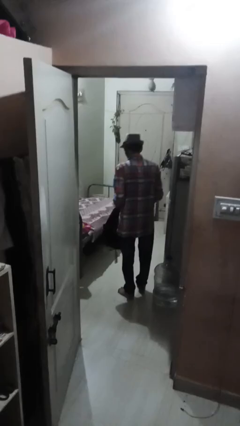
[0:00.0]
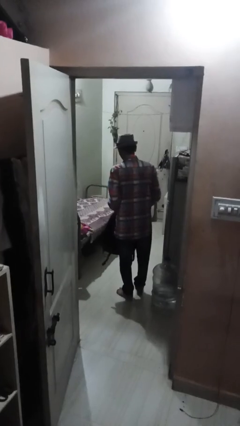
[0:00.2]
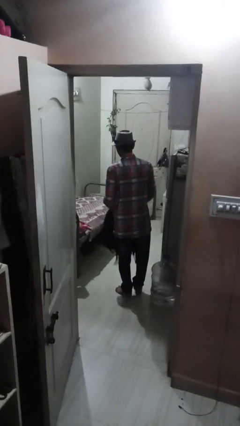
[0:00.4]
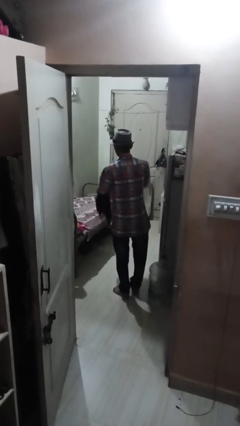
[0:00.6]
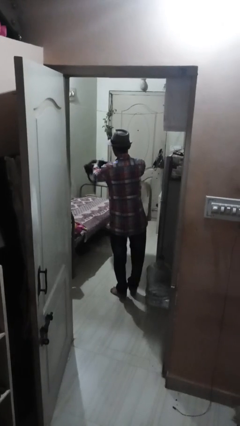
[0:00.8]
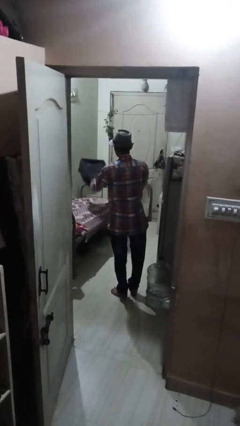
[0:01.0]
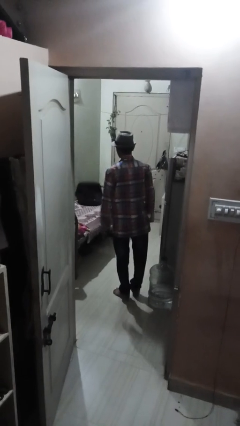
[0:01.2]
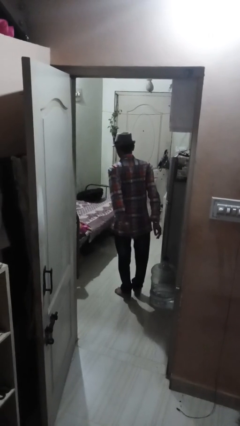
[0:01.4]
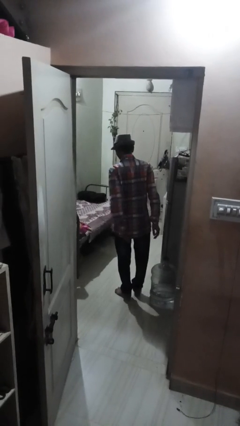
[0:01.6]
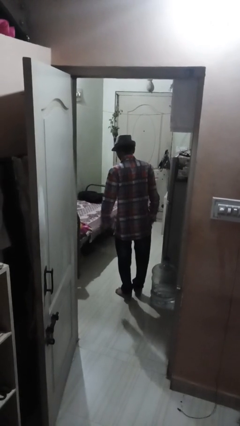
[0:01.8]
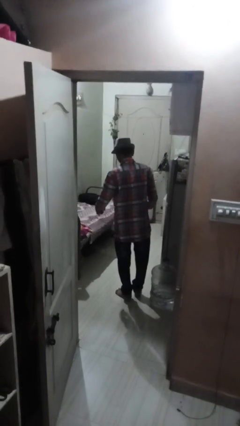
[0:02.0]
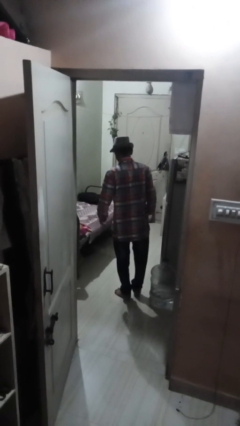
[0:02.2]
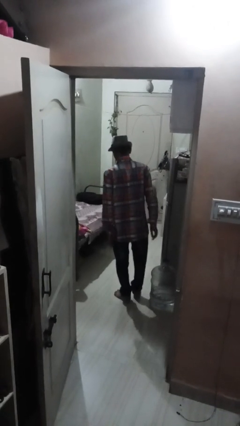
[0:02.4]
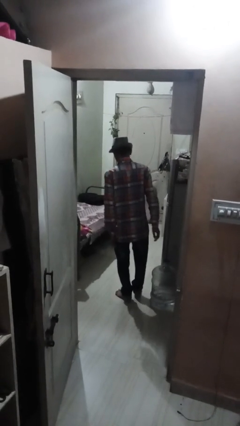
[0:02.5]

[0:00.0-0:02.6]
person throws object on bed

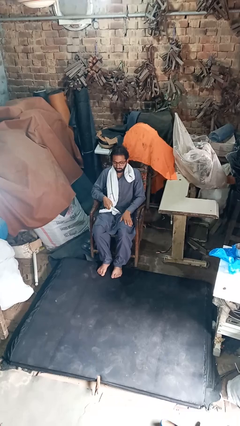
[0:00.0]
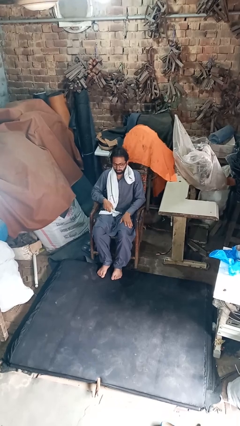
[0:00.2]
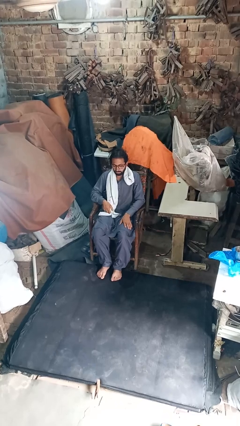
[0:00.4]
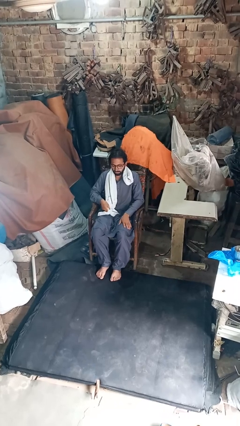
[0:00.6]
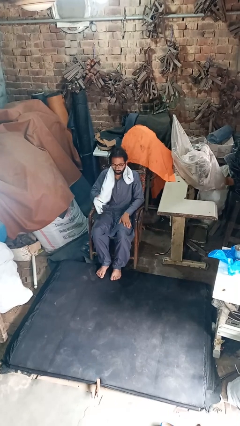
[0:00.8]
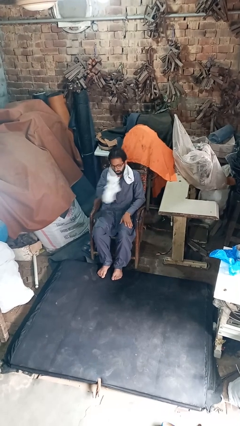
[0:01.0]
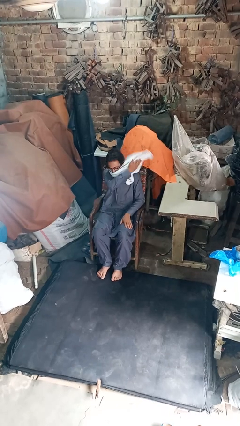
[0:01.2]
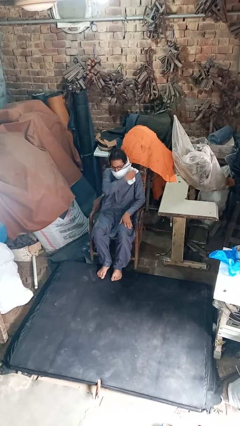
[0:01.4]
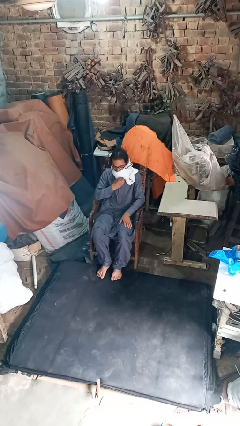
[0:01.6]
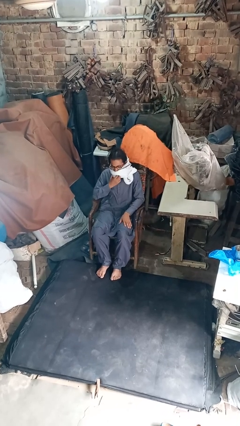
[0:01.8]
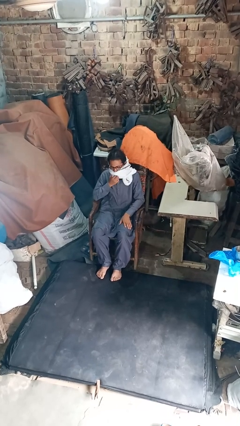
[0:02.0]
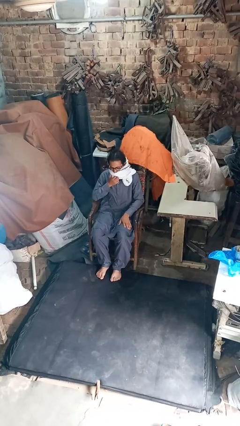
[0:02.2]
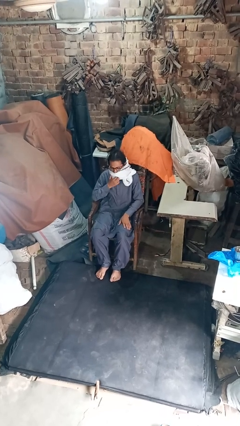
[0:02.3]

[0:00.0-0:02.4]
person puts on scarf

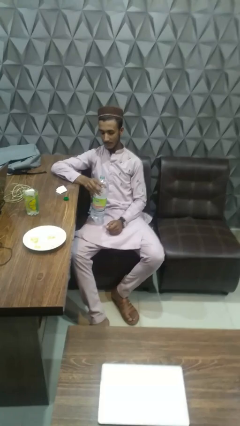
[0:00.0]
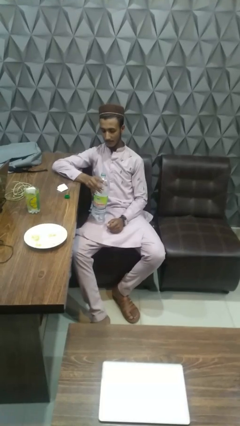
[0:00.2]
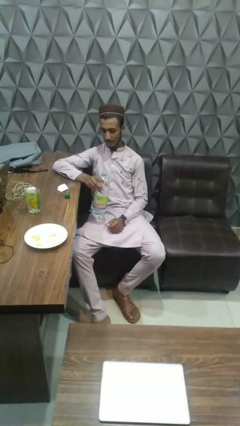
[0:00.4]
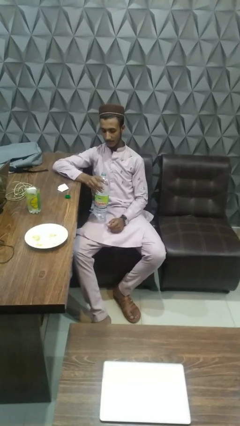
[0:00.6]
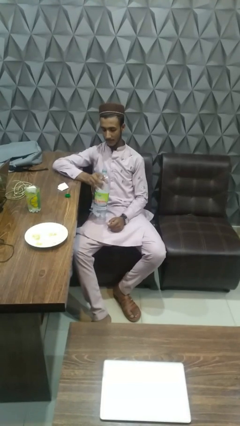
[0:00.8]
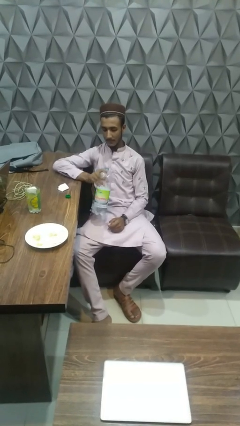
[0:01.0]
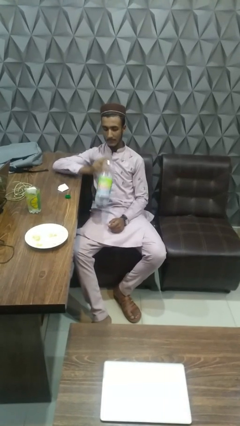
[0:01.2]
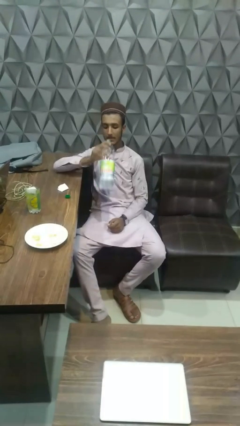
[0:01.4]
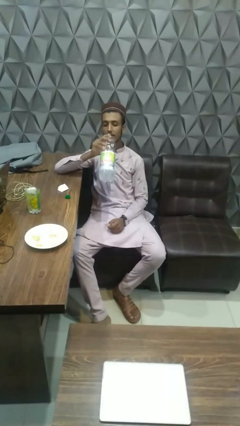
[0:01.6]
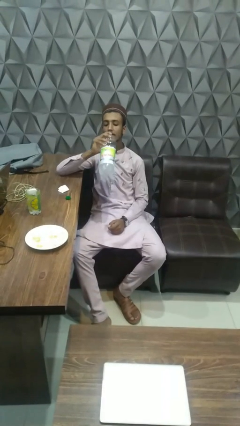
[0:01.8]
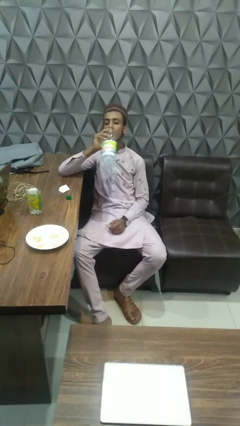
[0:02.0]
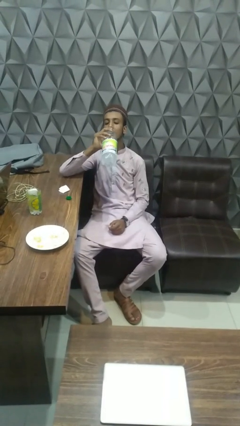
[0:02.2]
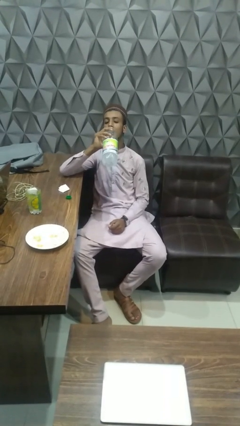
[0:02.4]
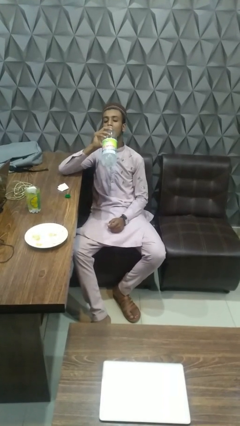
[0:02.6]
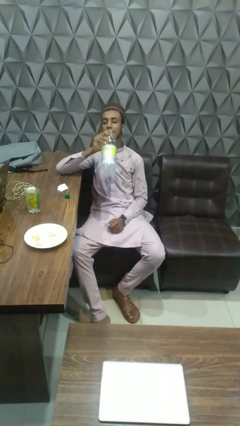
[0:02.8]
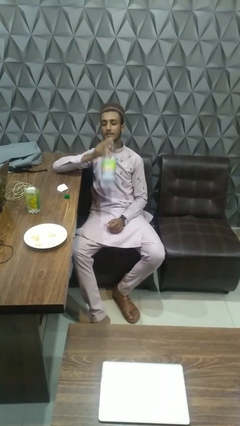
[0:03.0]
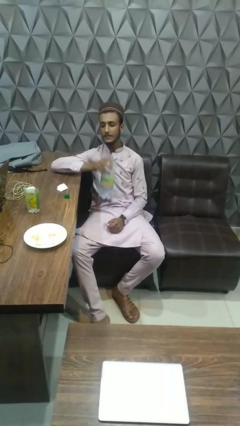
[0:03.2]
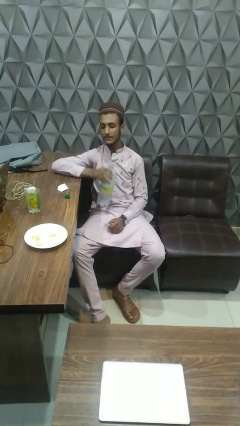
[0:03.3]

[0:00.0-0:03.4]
person drinks from bottle

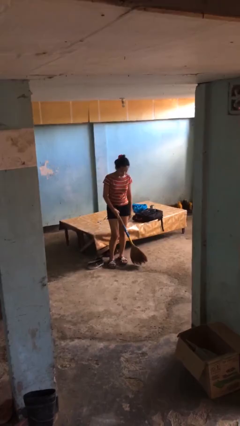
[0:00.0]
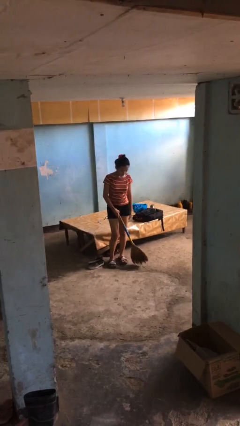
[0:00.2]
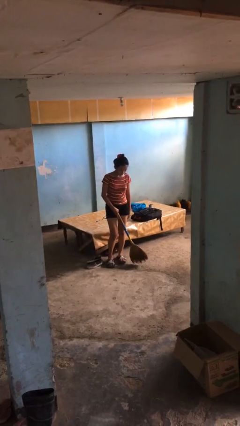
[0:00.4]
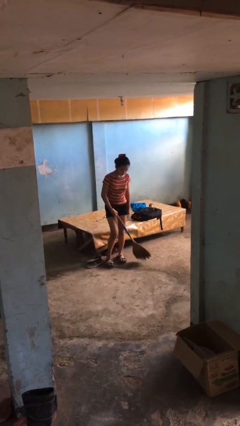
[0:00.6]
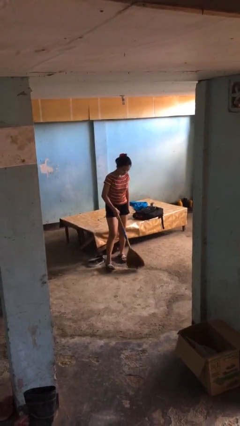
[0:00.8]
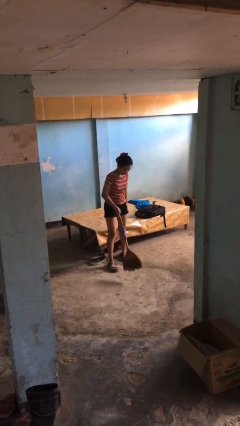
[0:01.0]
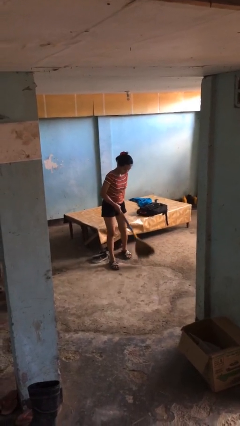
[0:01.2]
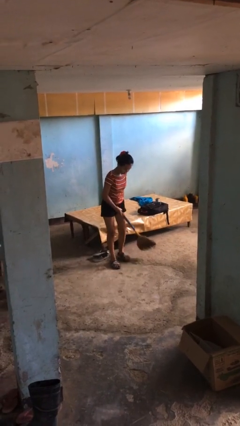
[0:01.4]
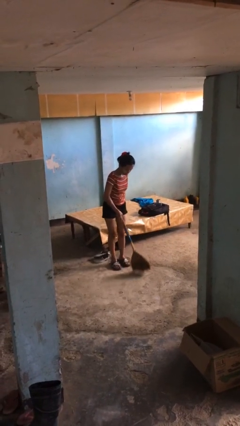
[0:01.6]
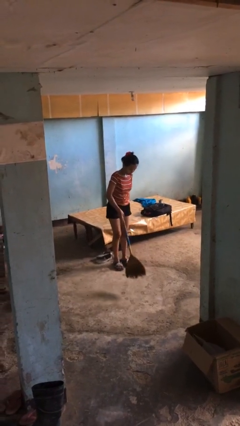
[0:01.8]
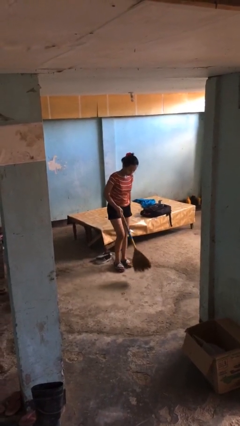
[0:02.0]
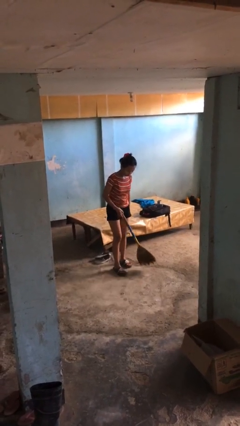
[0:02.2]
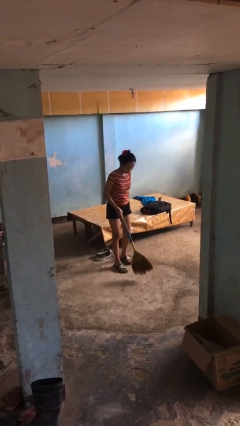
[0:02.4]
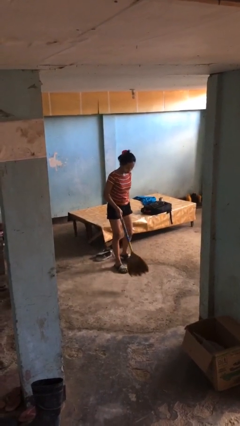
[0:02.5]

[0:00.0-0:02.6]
person sweeps floor

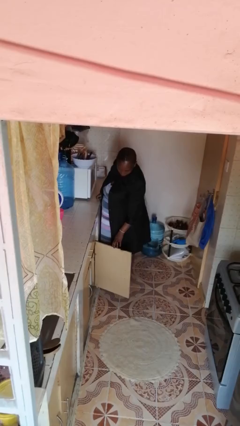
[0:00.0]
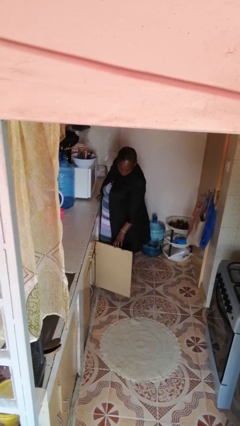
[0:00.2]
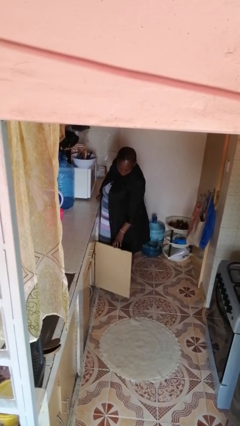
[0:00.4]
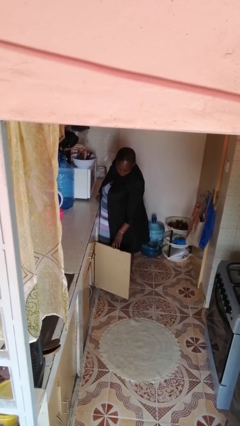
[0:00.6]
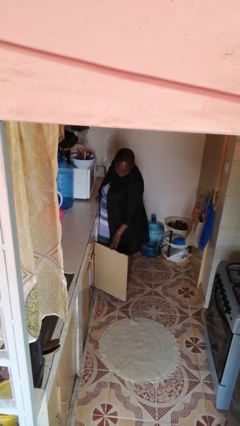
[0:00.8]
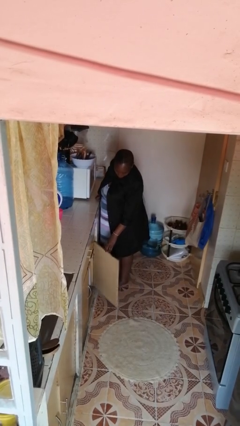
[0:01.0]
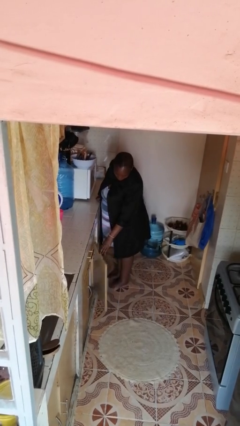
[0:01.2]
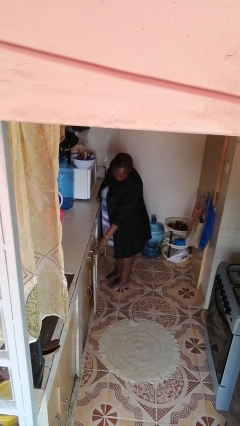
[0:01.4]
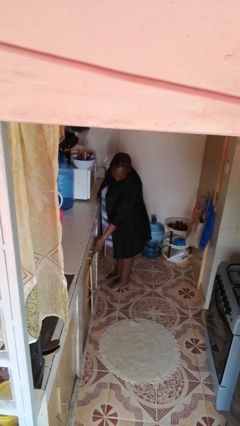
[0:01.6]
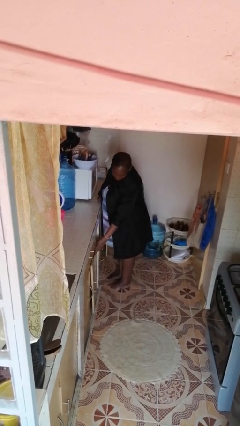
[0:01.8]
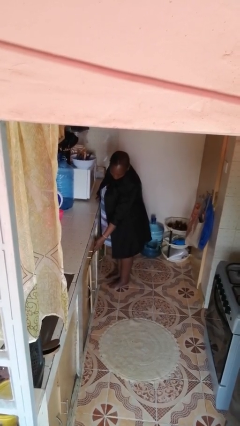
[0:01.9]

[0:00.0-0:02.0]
person closes cabinet

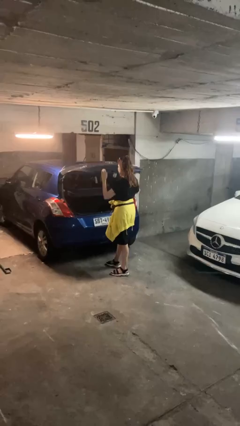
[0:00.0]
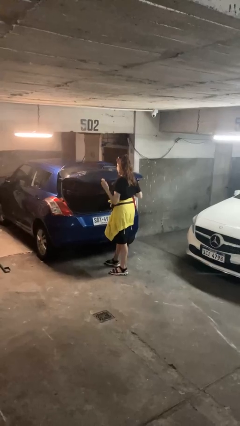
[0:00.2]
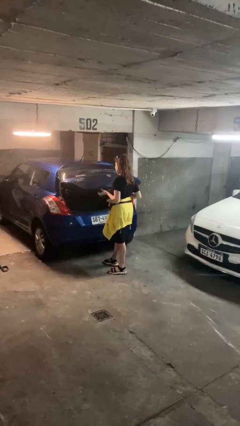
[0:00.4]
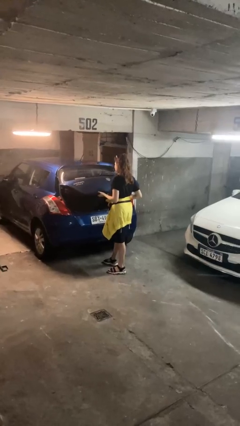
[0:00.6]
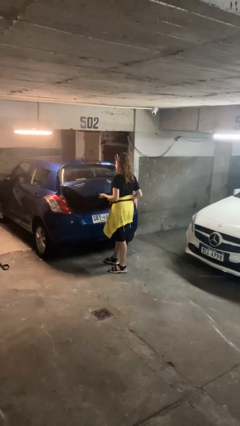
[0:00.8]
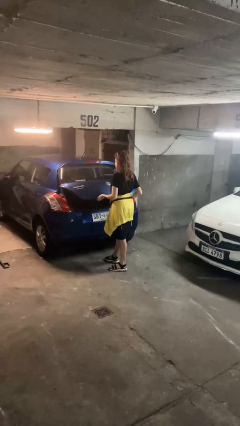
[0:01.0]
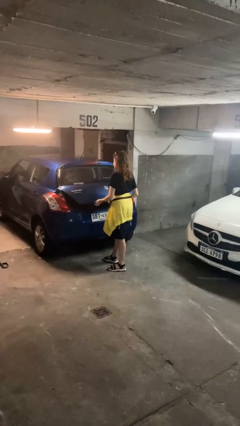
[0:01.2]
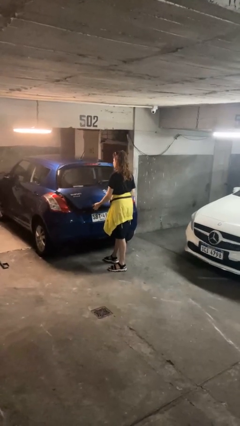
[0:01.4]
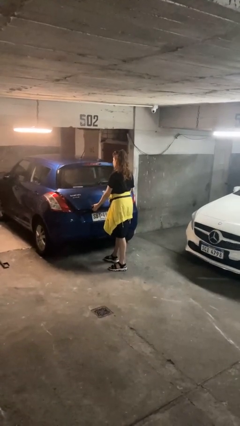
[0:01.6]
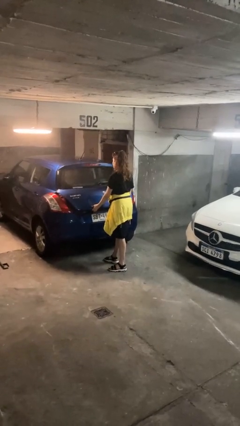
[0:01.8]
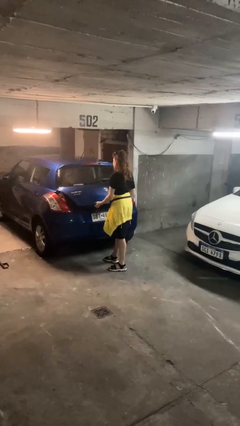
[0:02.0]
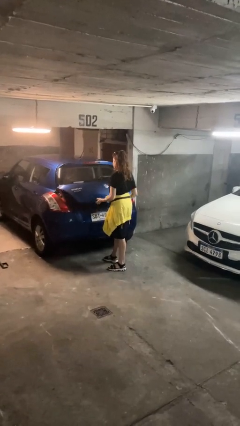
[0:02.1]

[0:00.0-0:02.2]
person closes car trunk

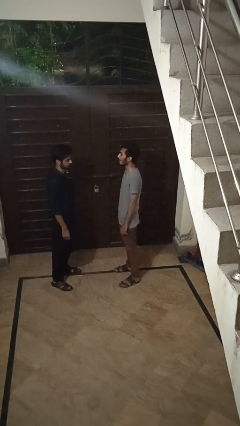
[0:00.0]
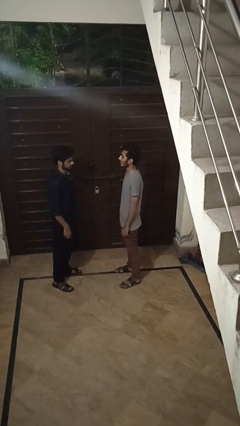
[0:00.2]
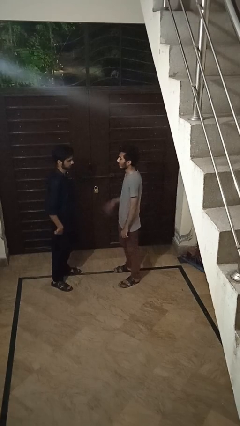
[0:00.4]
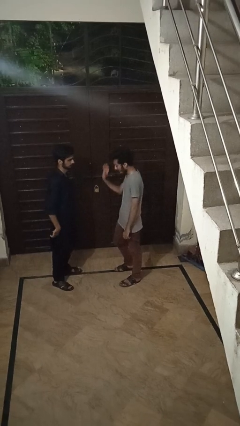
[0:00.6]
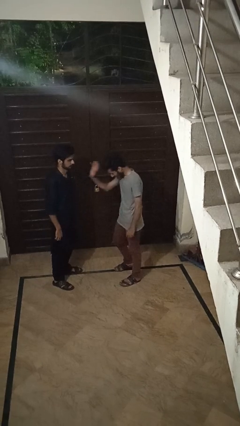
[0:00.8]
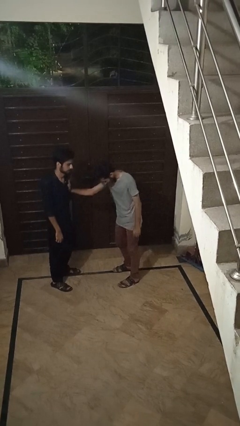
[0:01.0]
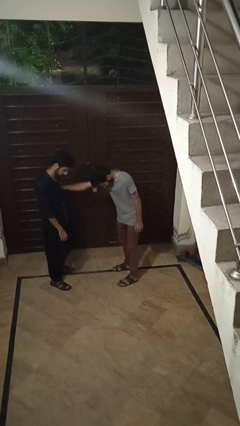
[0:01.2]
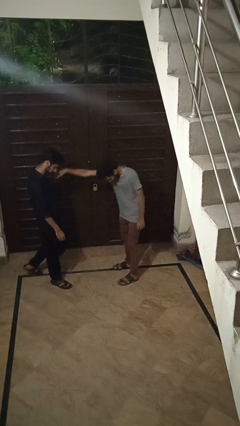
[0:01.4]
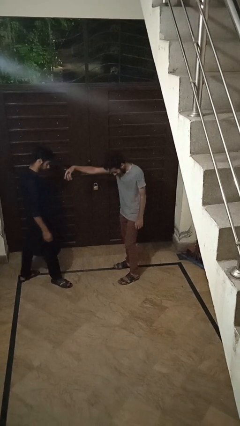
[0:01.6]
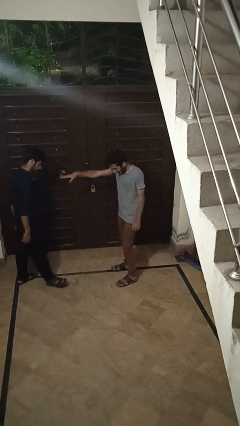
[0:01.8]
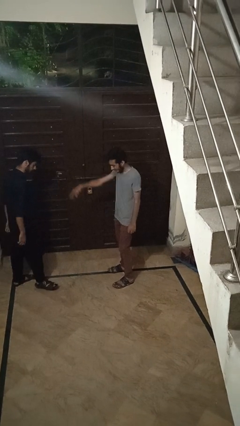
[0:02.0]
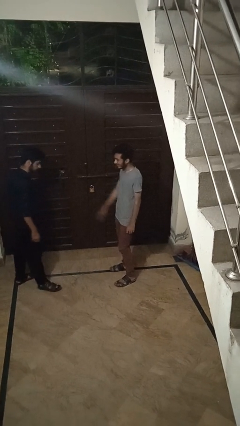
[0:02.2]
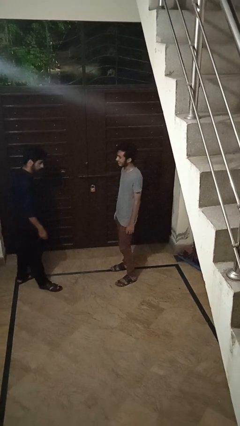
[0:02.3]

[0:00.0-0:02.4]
person shoves person
